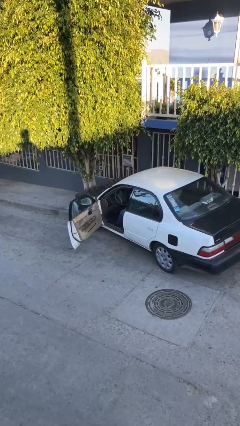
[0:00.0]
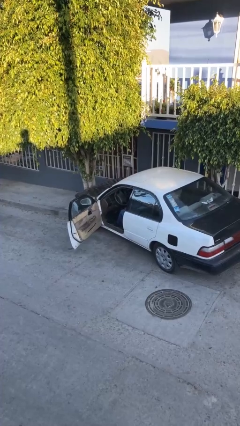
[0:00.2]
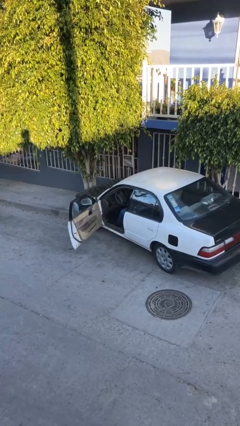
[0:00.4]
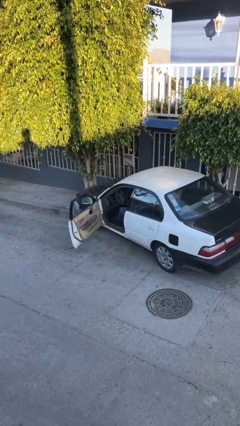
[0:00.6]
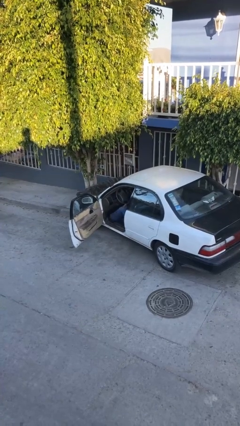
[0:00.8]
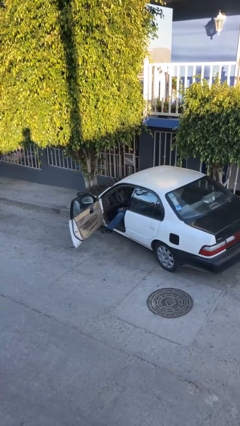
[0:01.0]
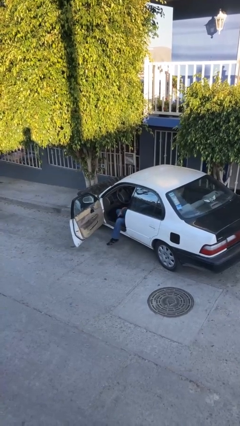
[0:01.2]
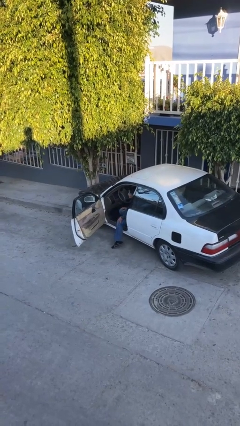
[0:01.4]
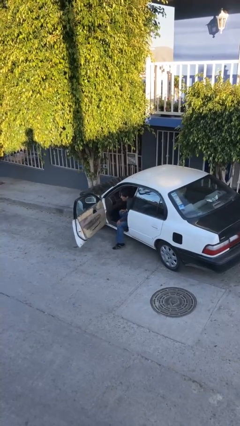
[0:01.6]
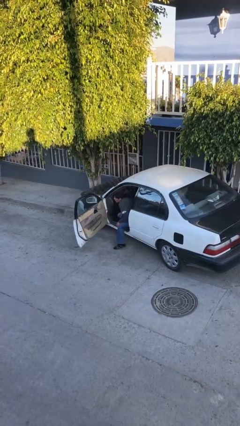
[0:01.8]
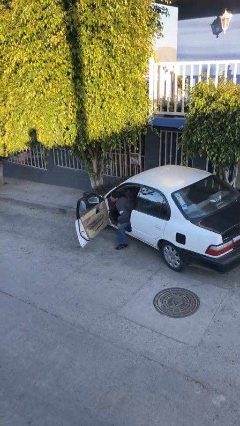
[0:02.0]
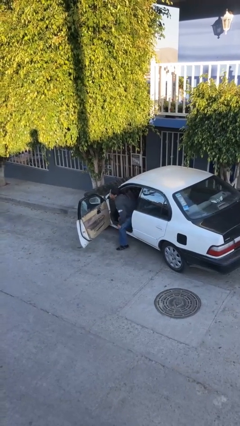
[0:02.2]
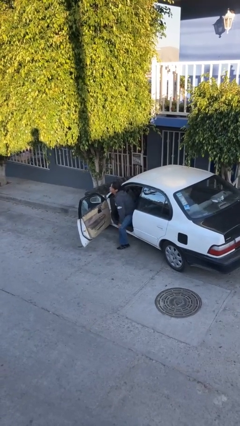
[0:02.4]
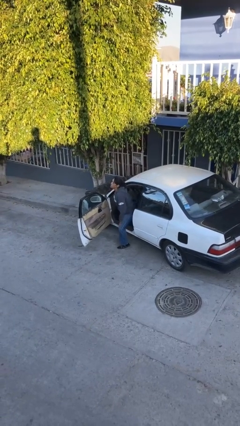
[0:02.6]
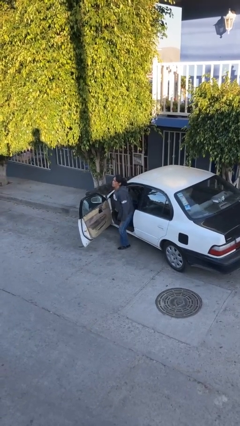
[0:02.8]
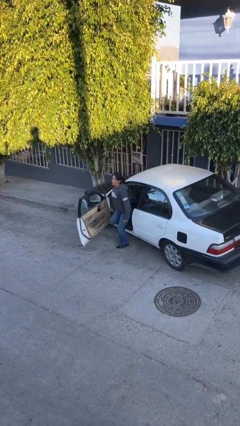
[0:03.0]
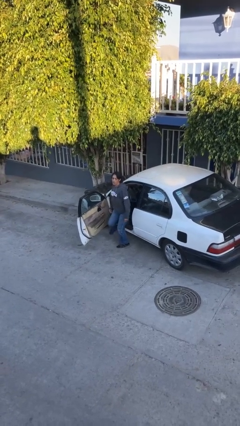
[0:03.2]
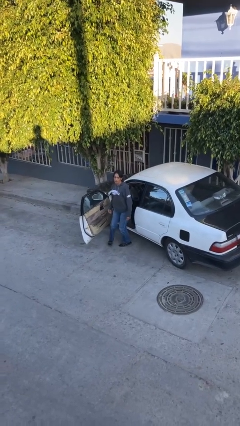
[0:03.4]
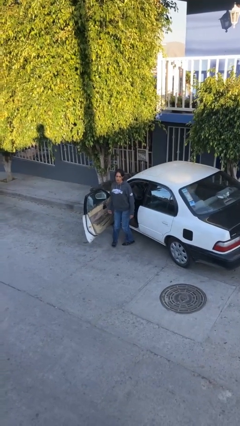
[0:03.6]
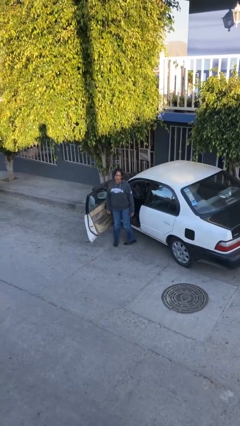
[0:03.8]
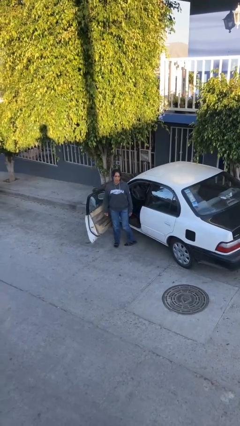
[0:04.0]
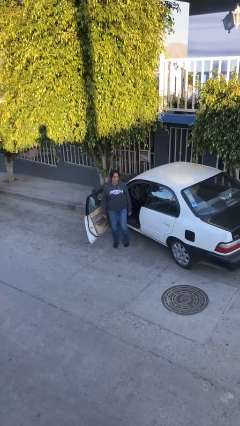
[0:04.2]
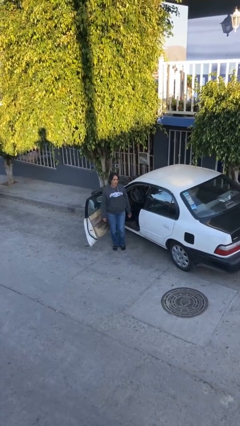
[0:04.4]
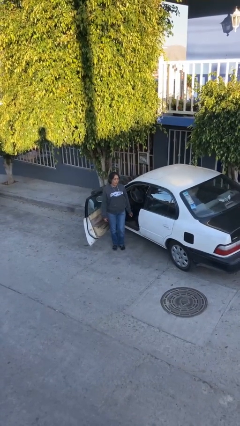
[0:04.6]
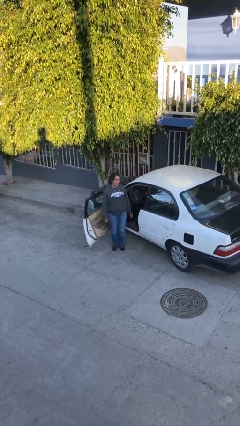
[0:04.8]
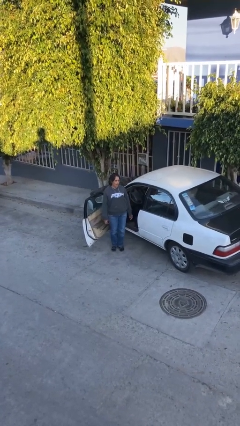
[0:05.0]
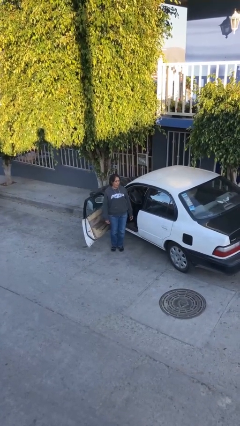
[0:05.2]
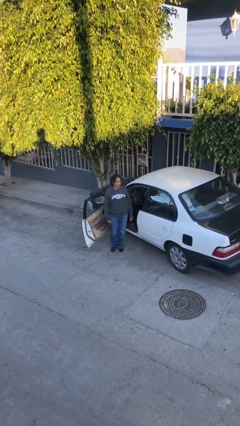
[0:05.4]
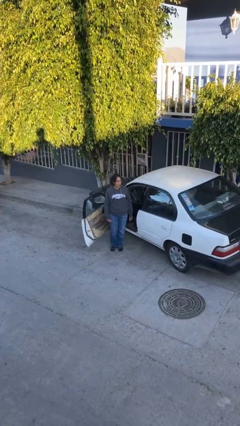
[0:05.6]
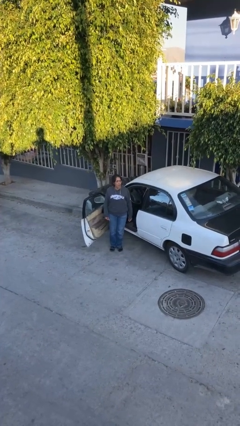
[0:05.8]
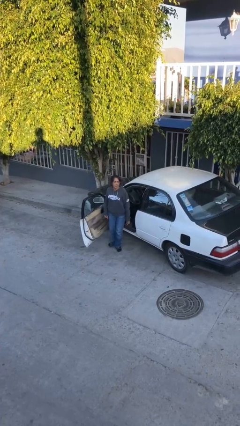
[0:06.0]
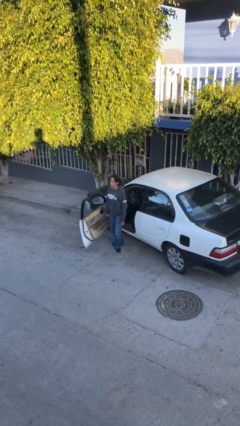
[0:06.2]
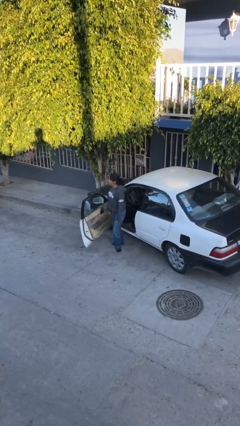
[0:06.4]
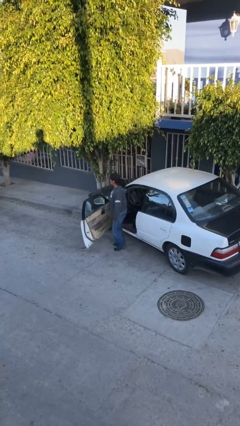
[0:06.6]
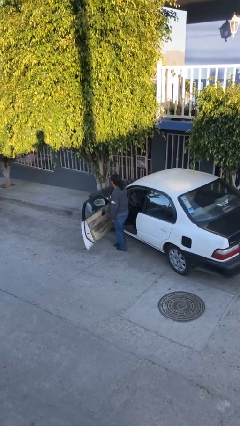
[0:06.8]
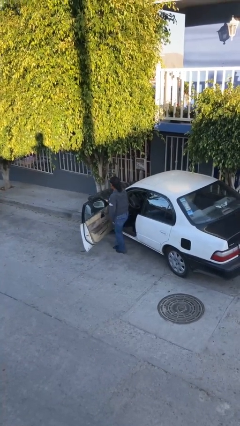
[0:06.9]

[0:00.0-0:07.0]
person exits car

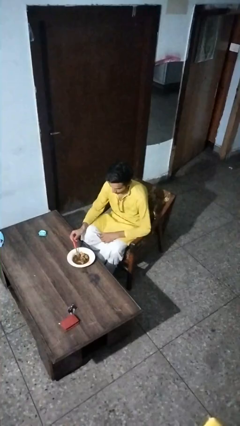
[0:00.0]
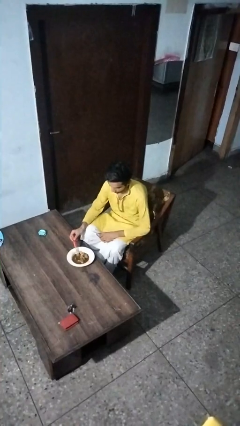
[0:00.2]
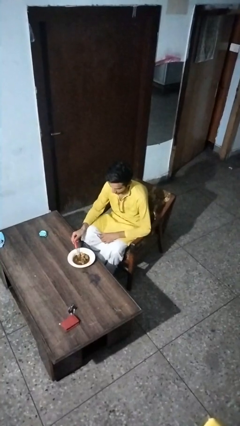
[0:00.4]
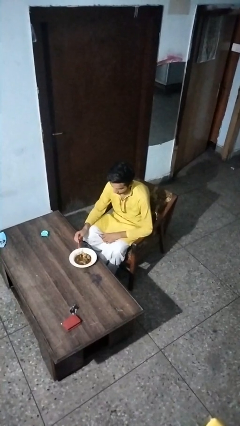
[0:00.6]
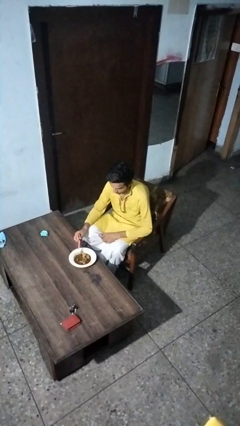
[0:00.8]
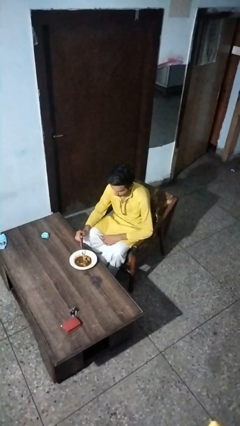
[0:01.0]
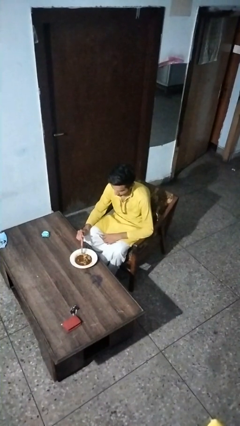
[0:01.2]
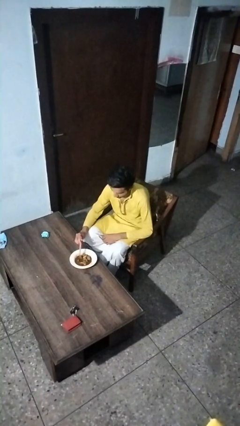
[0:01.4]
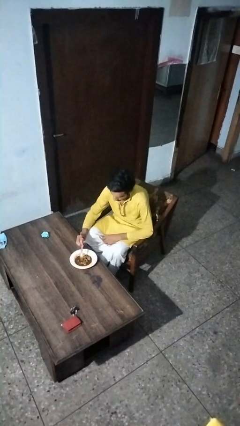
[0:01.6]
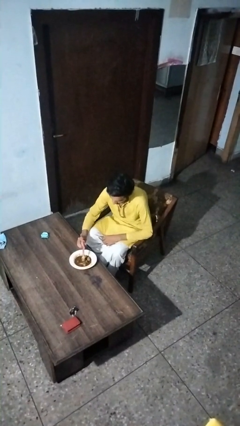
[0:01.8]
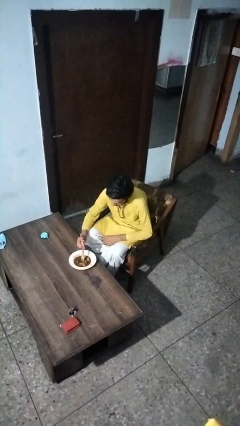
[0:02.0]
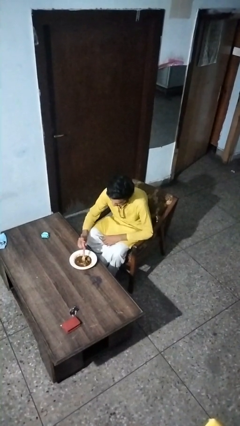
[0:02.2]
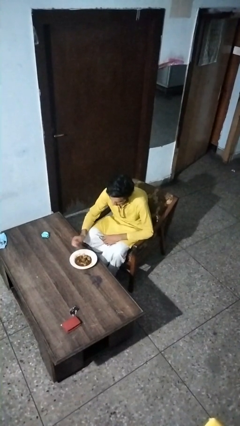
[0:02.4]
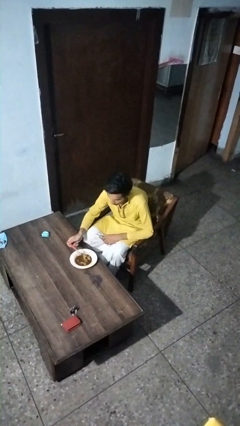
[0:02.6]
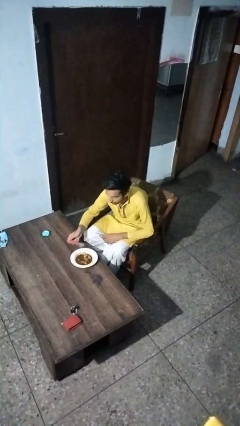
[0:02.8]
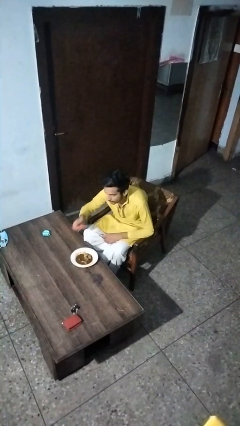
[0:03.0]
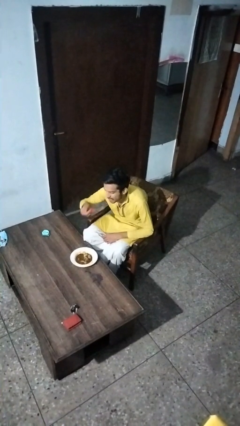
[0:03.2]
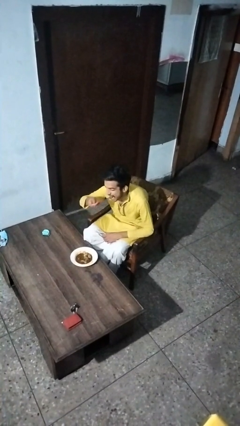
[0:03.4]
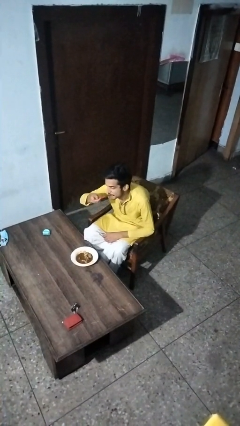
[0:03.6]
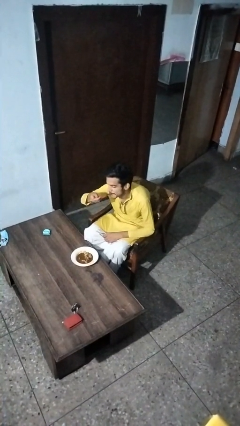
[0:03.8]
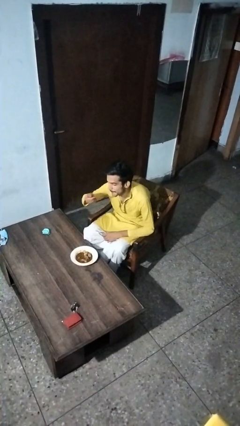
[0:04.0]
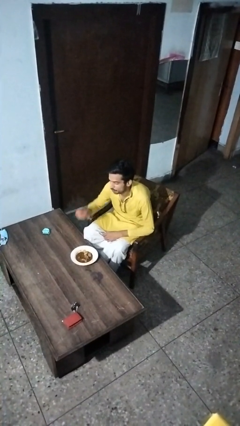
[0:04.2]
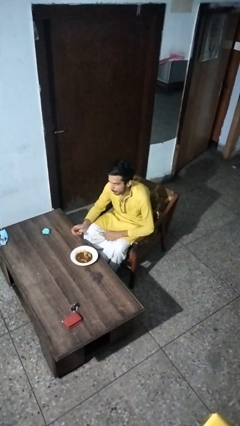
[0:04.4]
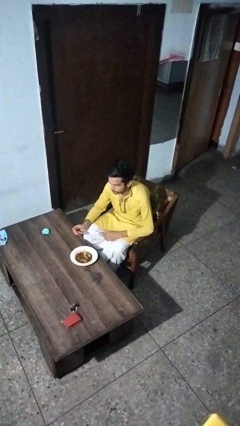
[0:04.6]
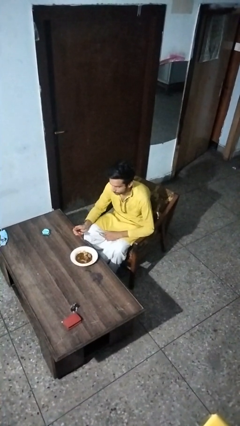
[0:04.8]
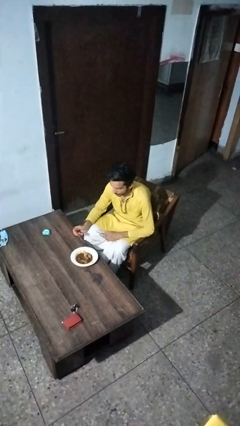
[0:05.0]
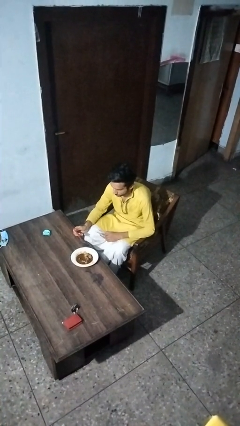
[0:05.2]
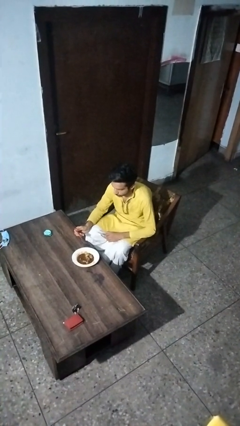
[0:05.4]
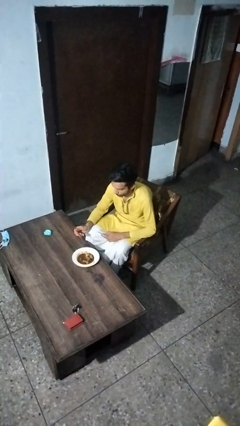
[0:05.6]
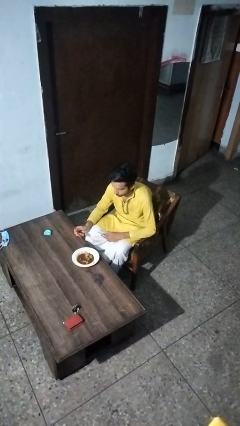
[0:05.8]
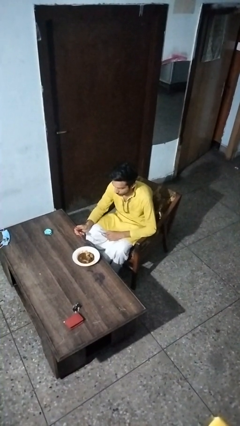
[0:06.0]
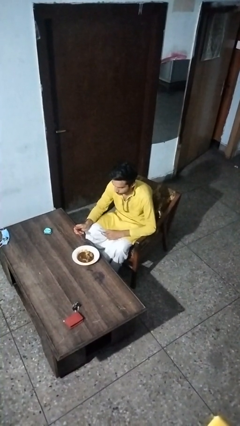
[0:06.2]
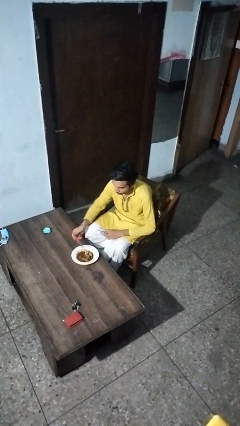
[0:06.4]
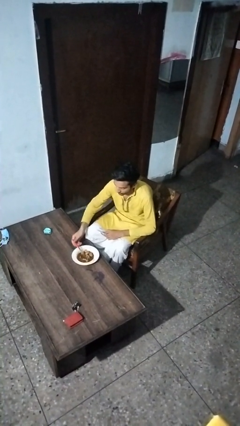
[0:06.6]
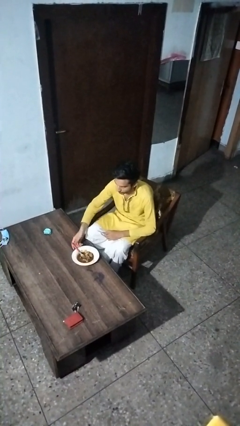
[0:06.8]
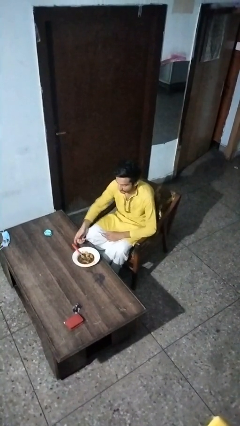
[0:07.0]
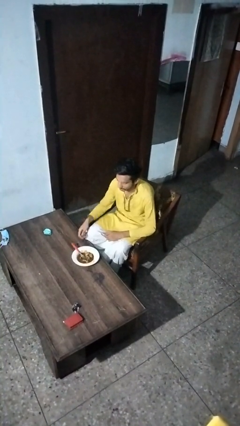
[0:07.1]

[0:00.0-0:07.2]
person eats with utensil

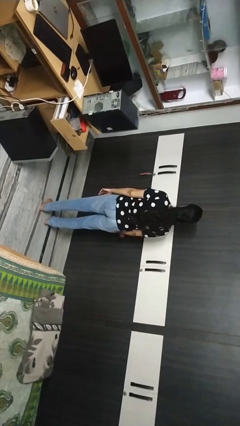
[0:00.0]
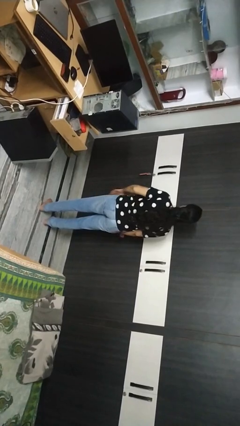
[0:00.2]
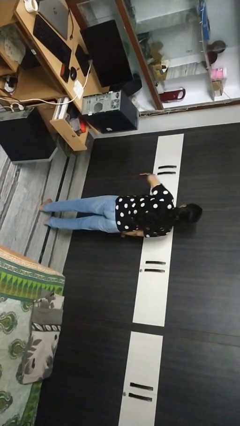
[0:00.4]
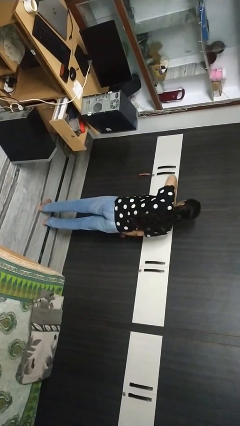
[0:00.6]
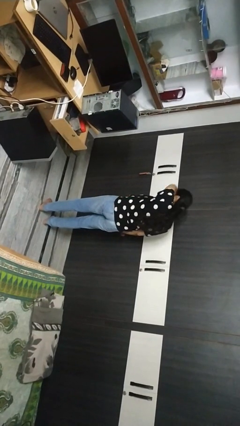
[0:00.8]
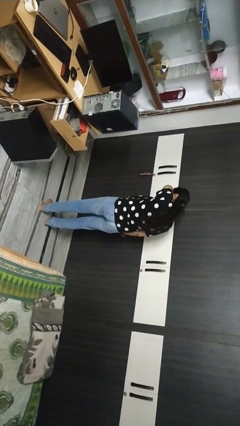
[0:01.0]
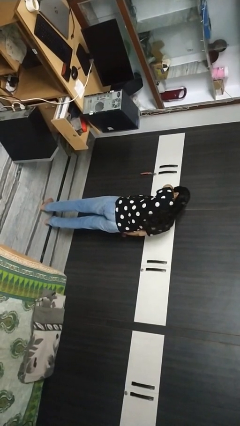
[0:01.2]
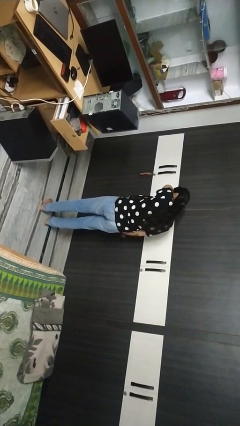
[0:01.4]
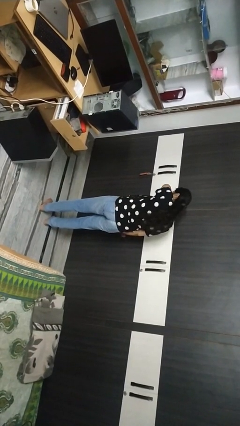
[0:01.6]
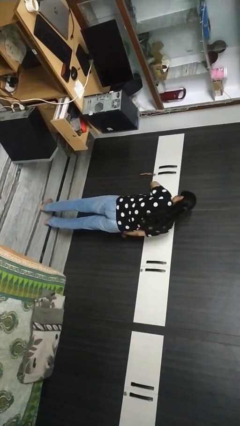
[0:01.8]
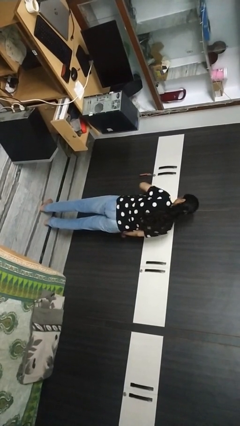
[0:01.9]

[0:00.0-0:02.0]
person sneezes into arm

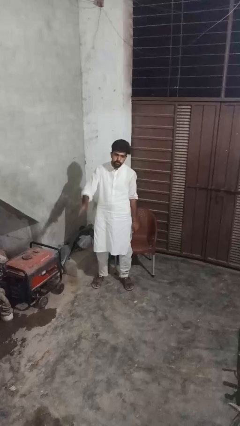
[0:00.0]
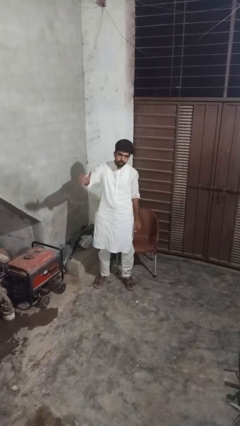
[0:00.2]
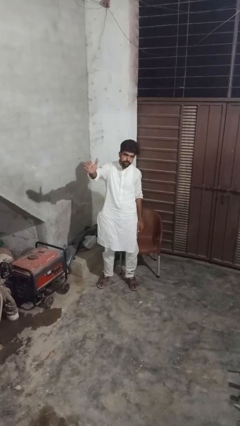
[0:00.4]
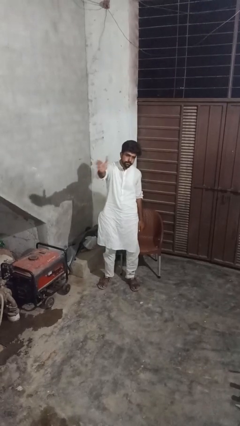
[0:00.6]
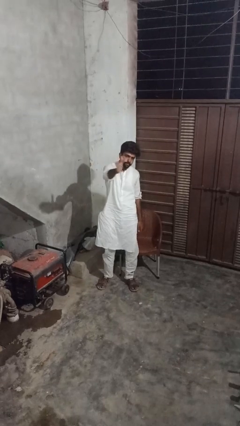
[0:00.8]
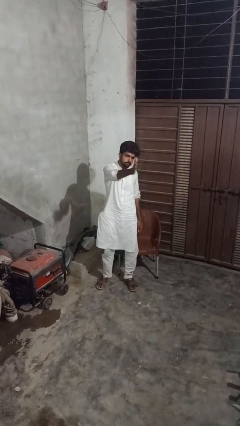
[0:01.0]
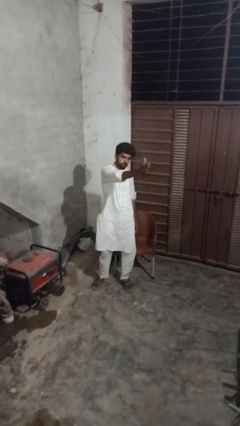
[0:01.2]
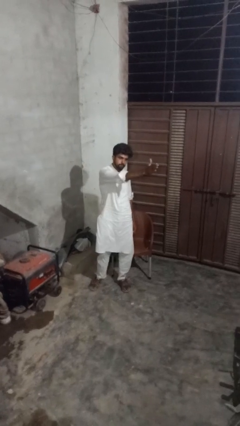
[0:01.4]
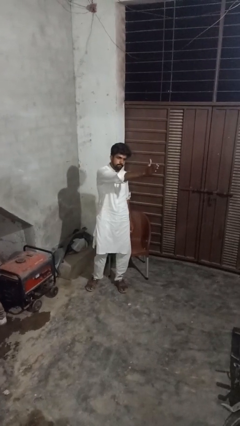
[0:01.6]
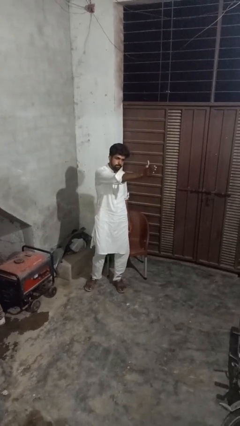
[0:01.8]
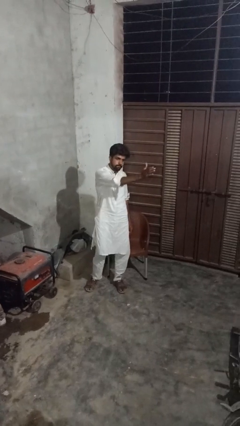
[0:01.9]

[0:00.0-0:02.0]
person gestures swipe left
